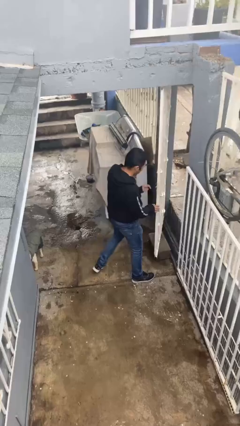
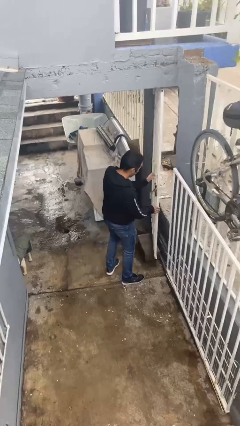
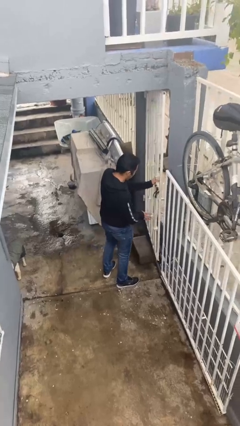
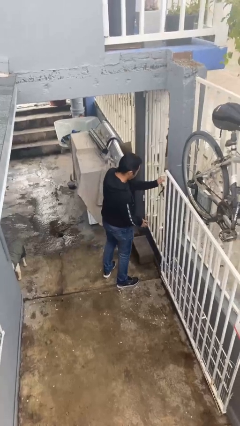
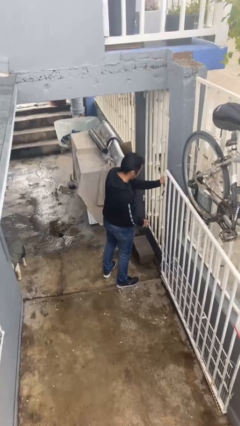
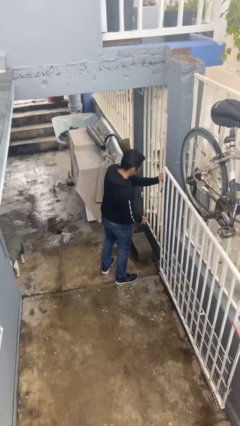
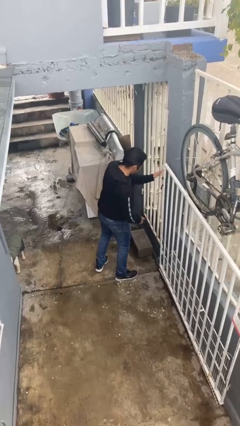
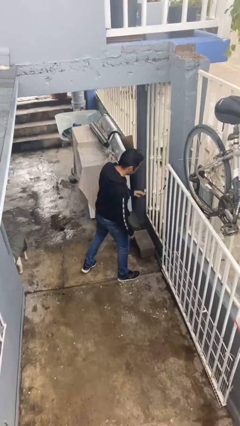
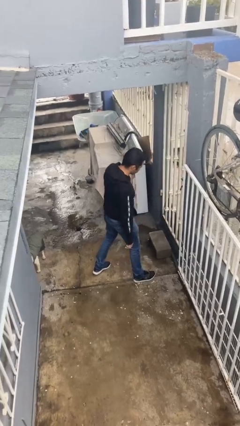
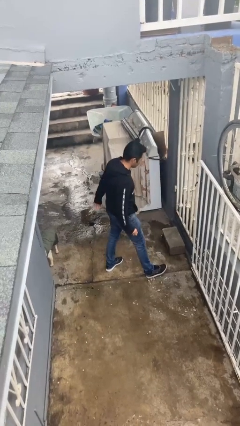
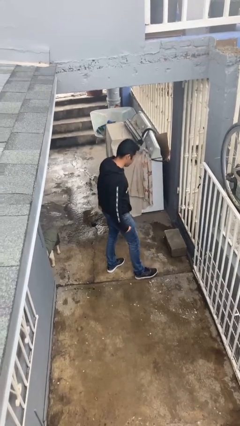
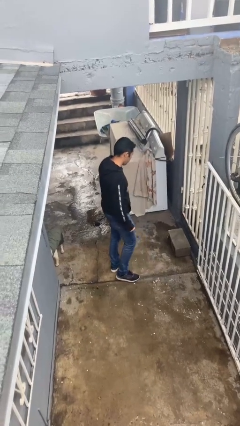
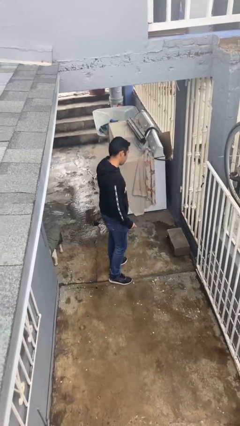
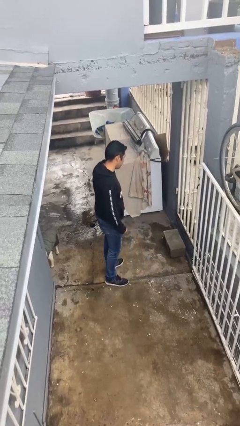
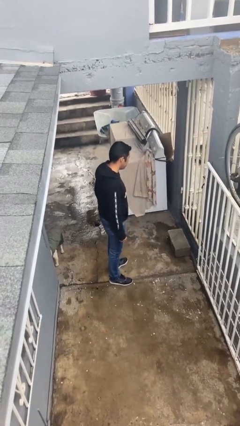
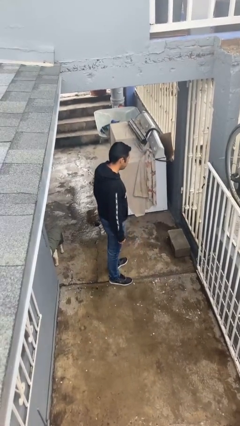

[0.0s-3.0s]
person closes facility door

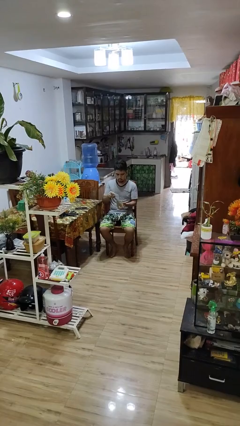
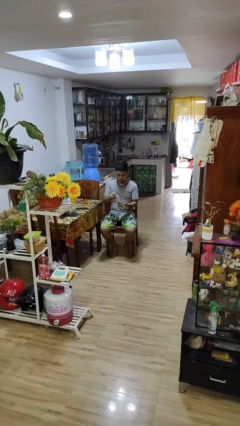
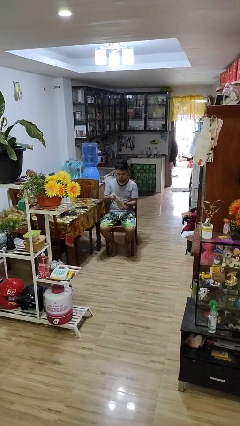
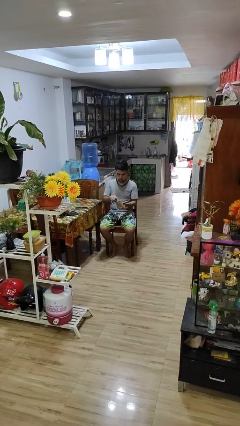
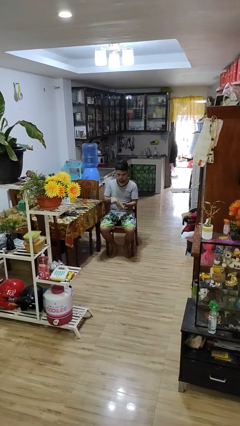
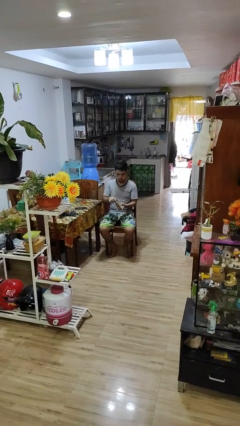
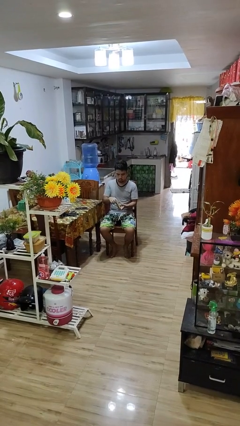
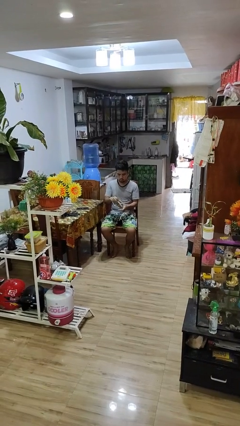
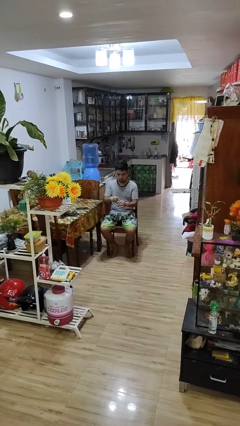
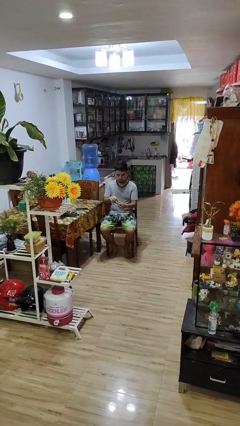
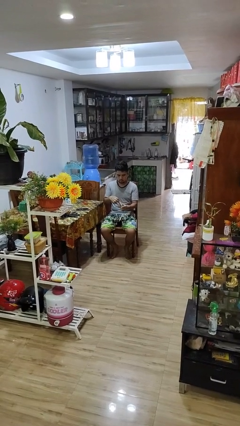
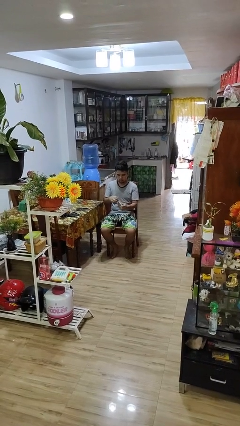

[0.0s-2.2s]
person puts object into purse

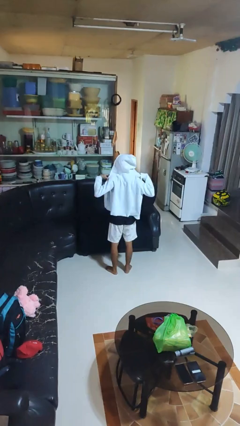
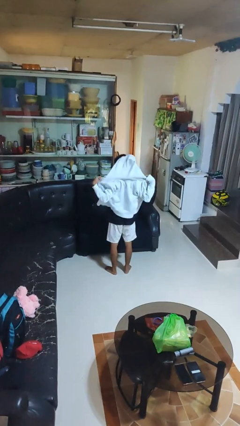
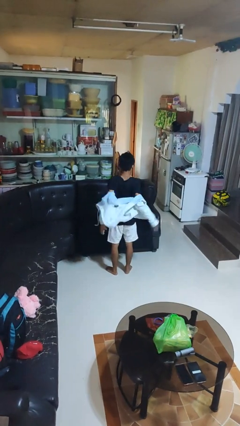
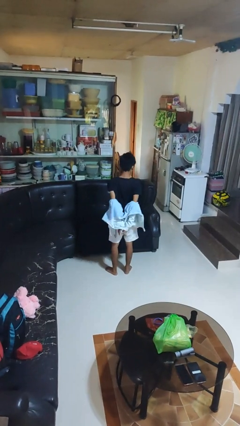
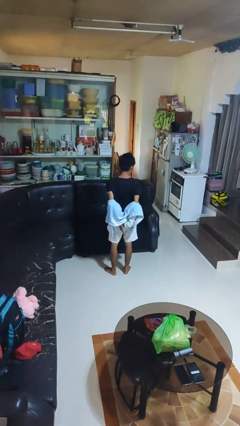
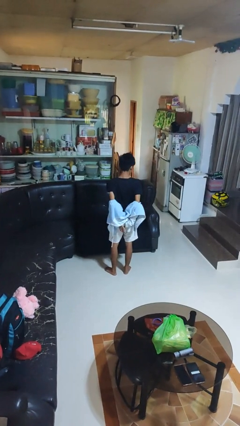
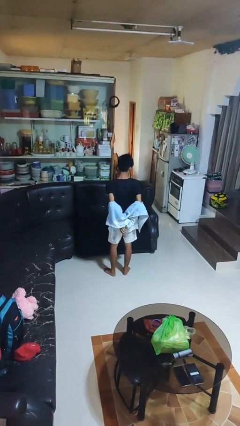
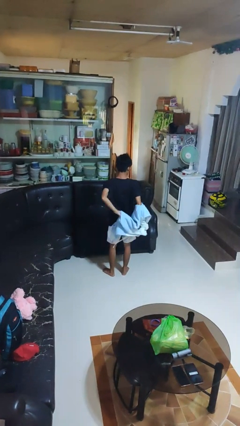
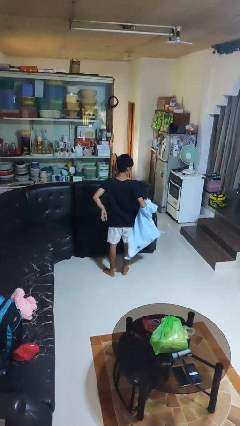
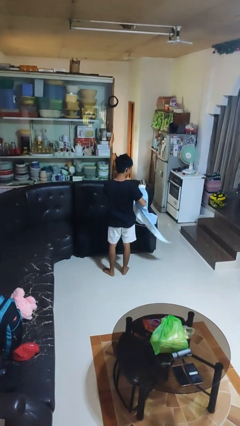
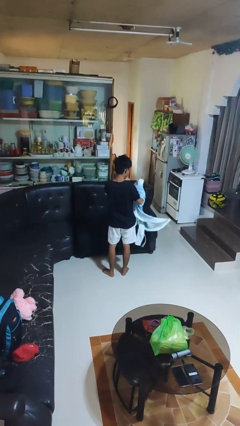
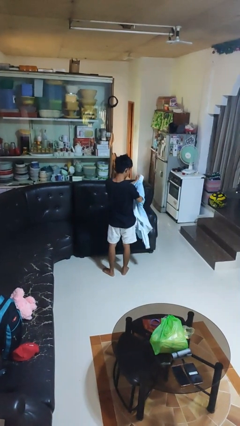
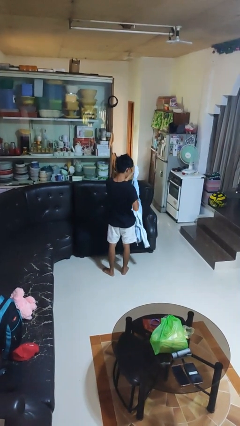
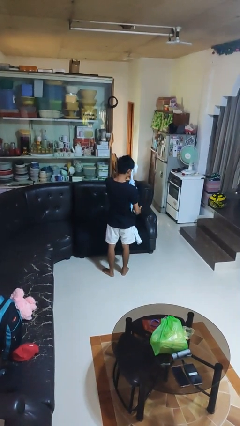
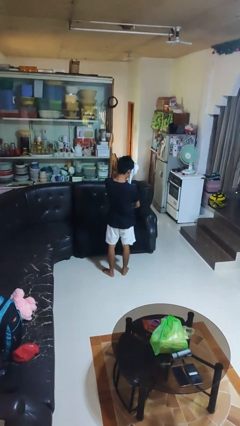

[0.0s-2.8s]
person takes off hoodie

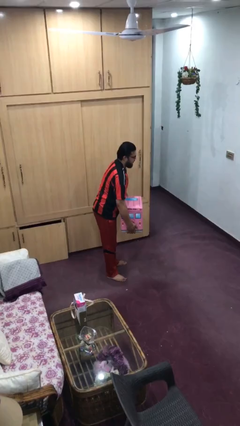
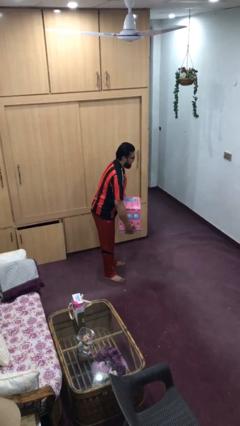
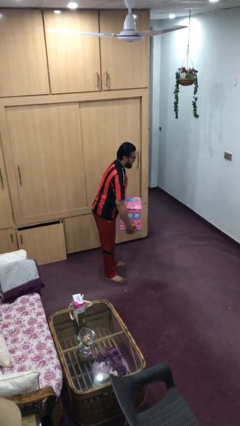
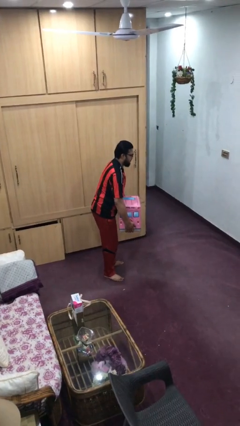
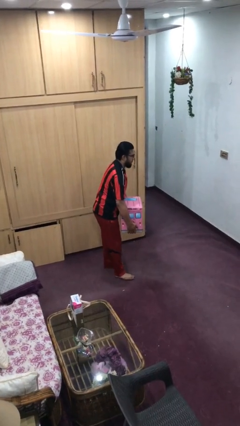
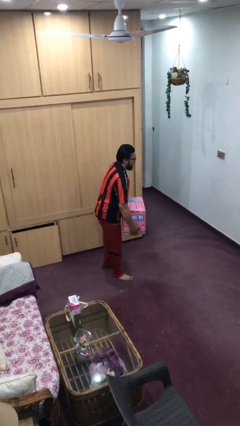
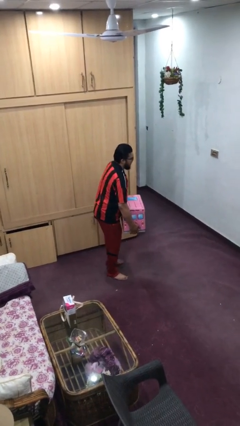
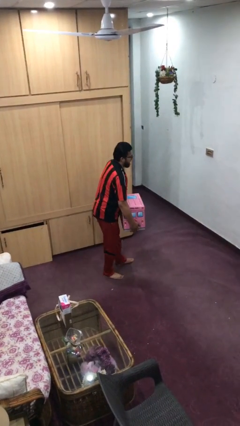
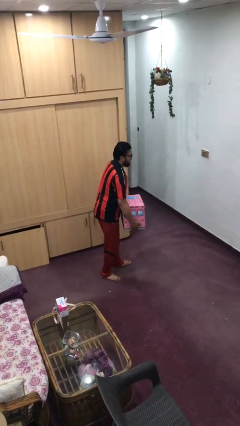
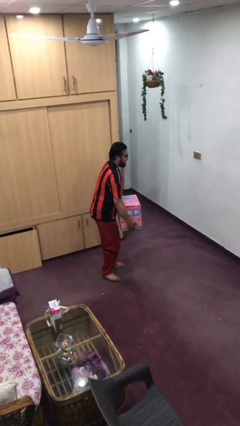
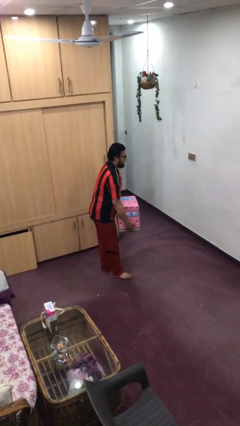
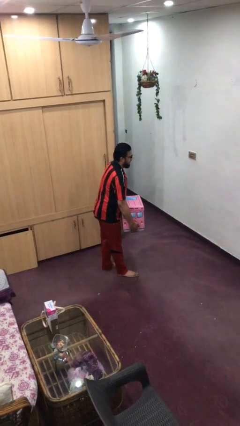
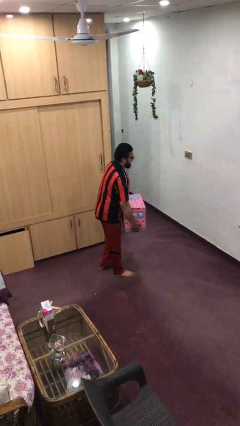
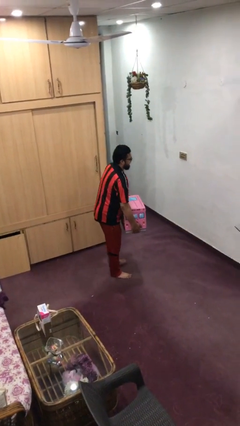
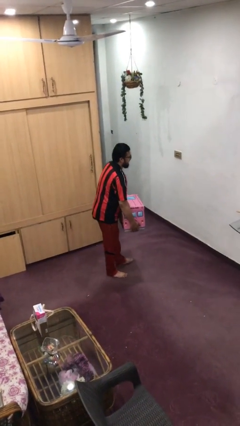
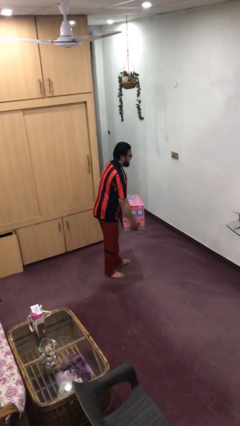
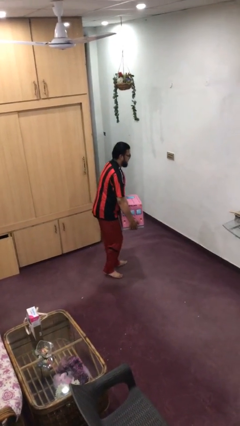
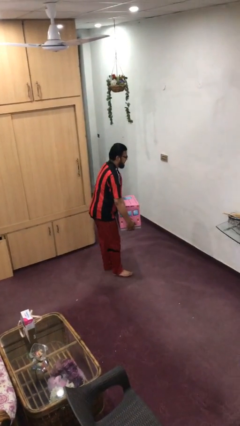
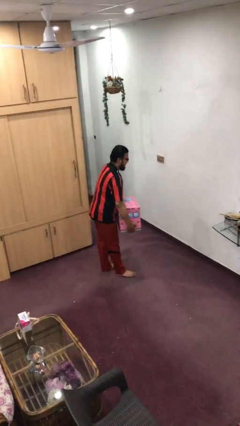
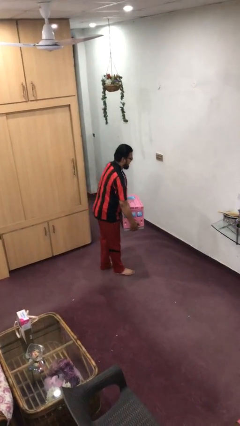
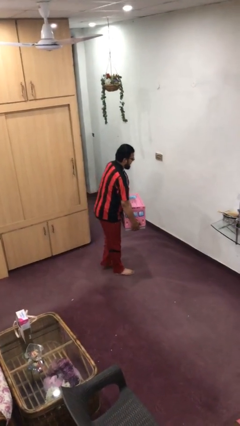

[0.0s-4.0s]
person carries heavy object

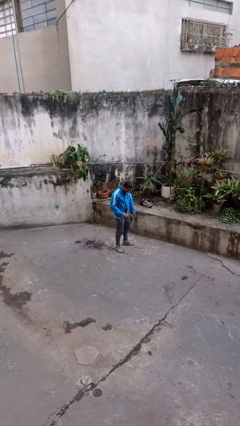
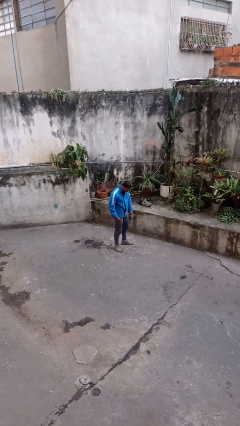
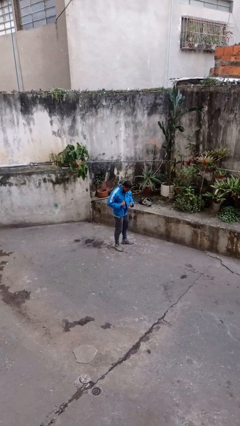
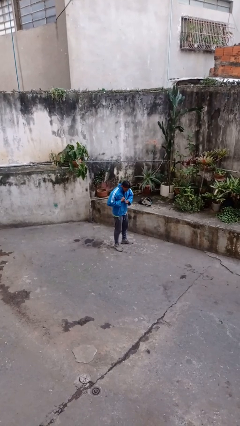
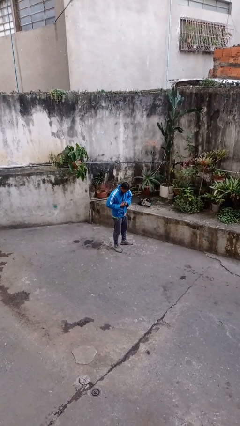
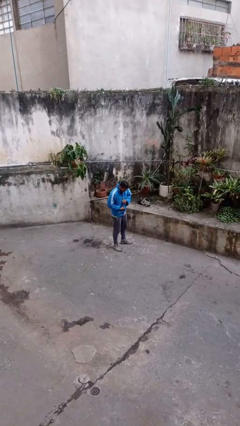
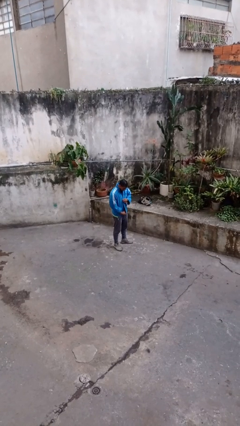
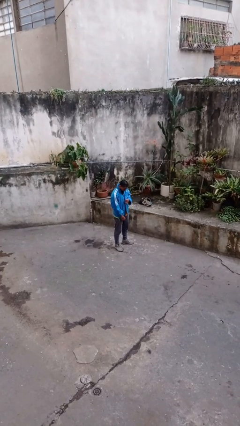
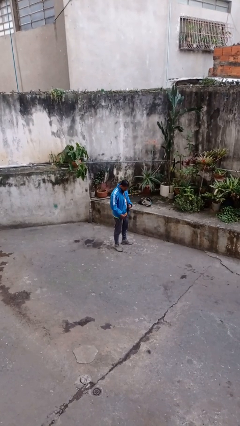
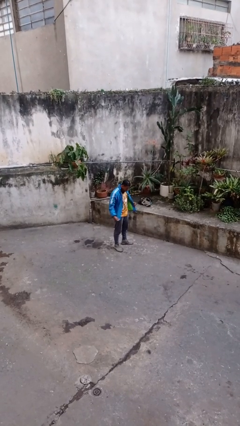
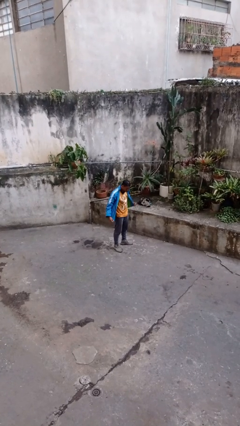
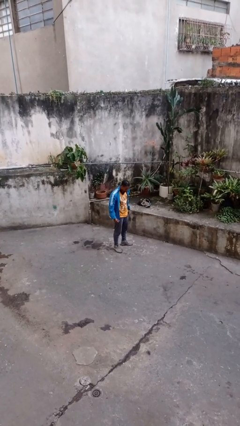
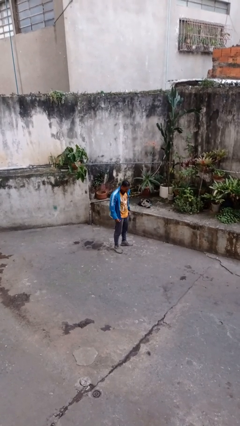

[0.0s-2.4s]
person unzips jacket

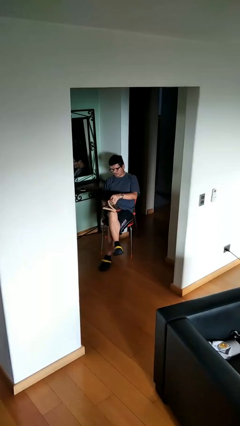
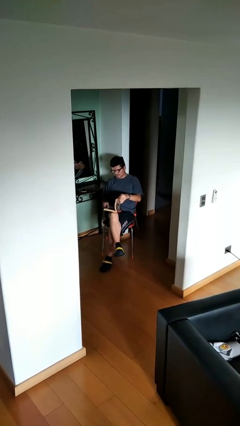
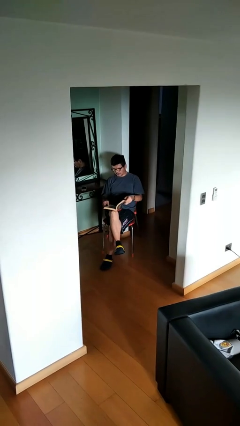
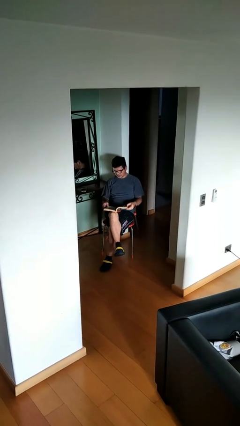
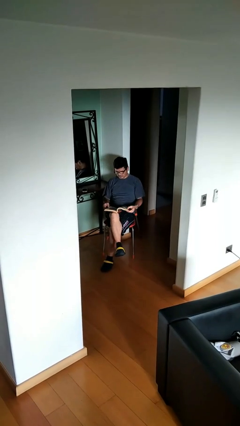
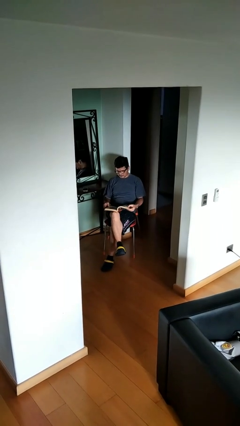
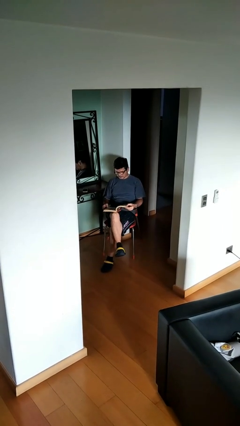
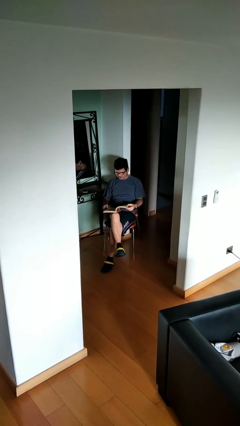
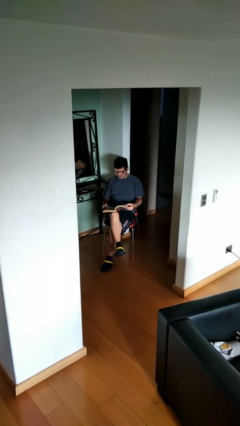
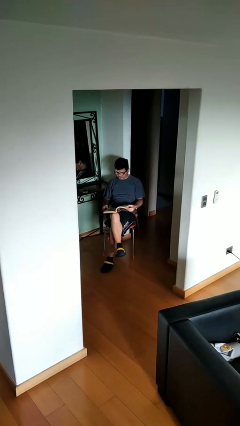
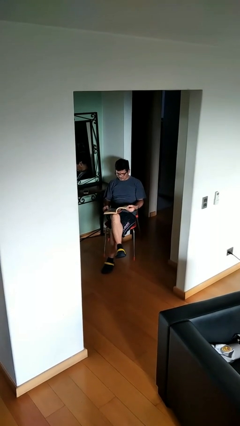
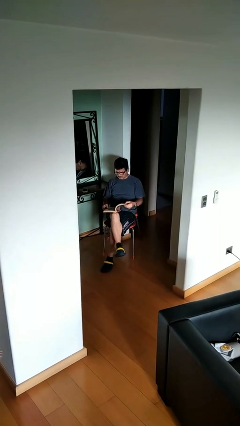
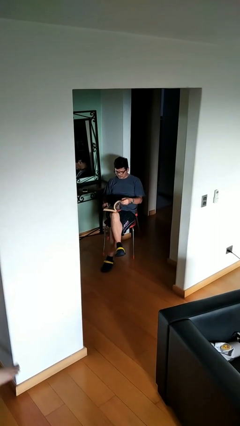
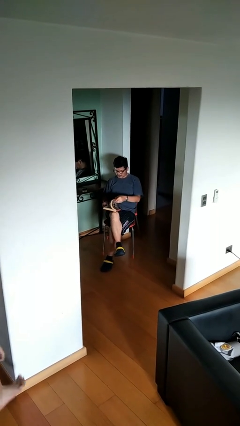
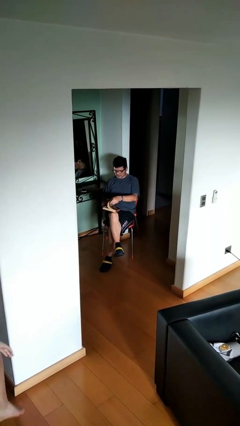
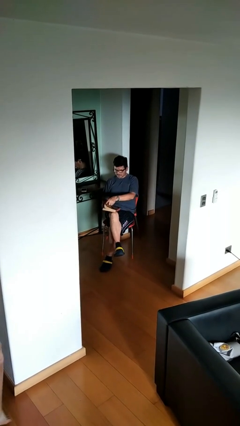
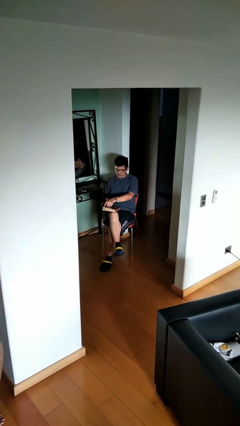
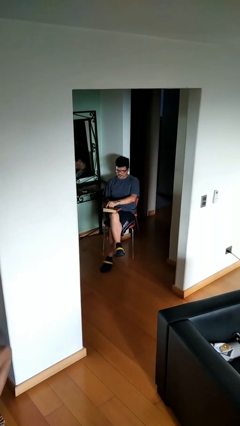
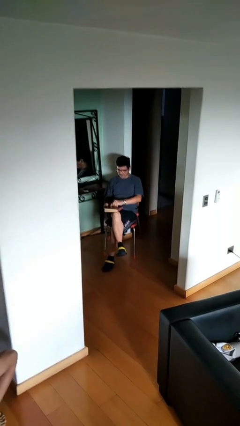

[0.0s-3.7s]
person reads document
